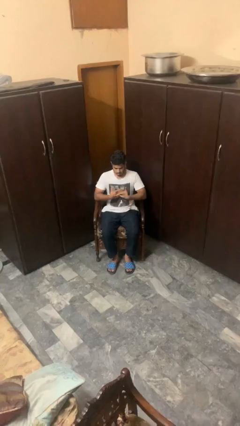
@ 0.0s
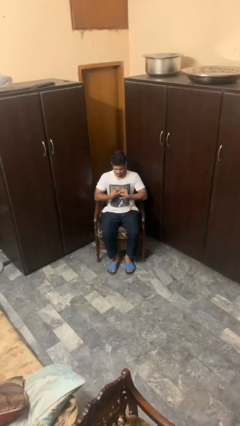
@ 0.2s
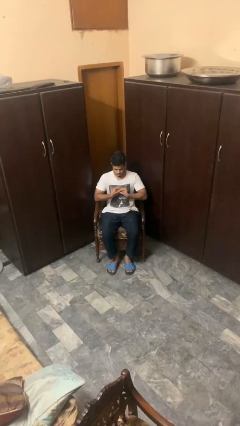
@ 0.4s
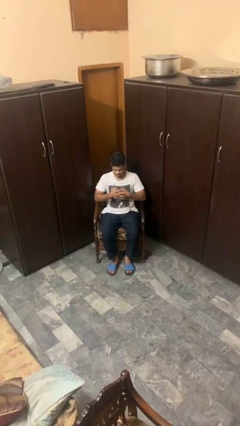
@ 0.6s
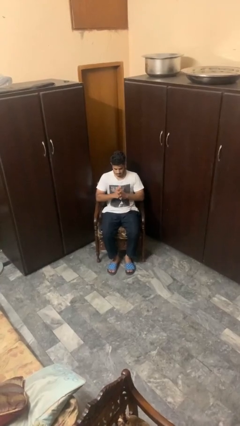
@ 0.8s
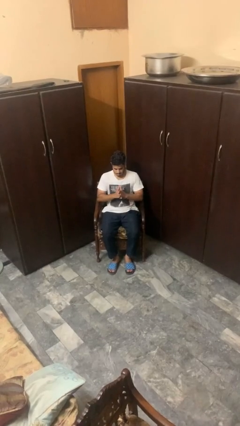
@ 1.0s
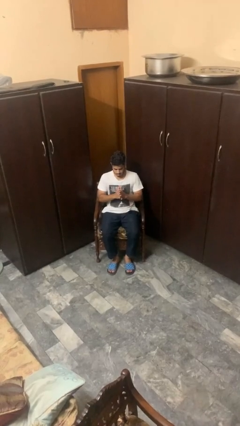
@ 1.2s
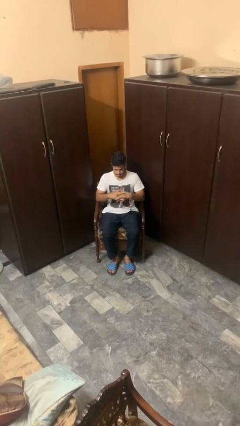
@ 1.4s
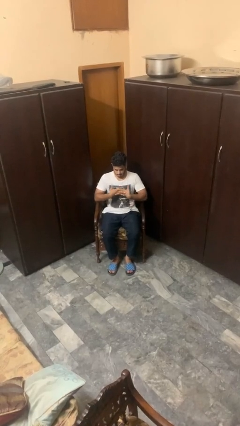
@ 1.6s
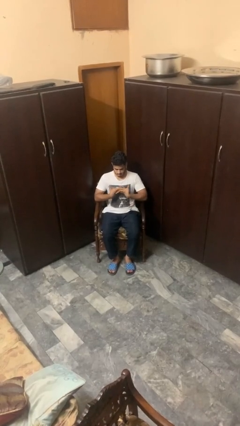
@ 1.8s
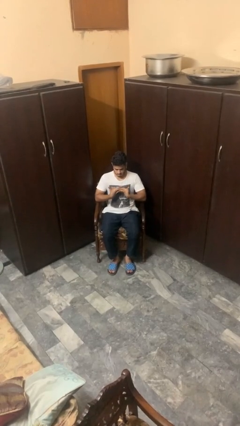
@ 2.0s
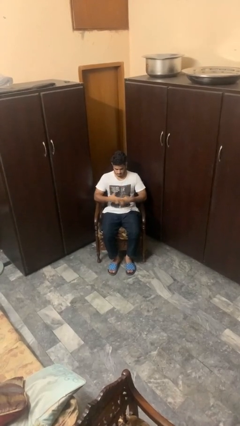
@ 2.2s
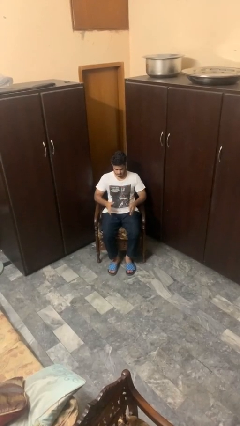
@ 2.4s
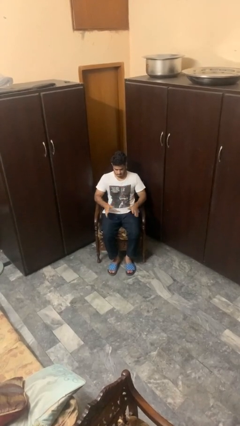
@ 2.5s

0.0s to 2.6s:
person cracks knuckles

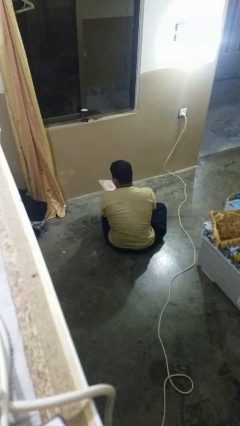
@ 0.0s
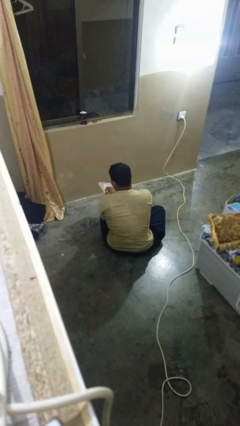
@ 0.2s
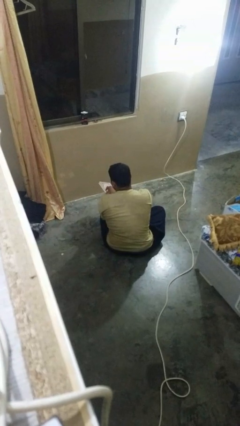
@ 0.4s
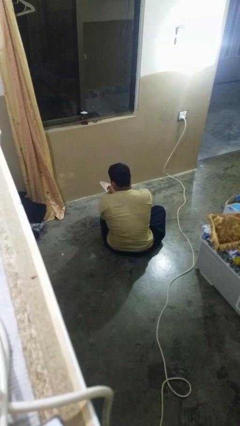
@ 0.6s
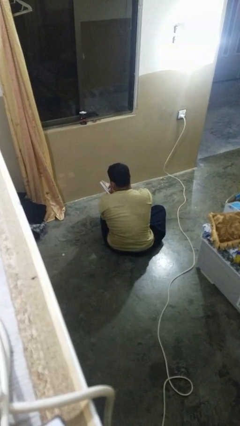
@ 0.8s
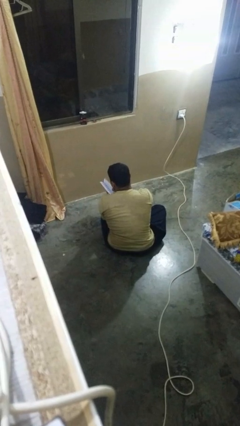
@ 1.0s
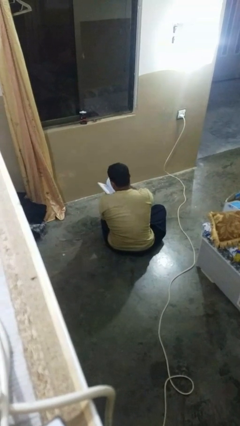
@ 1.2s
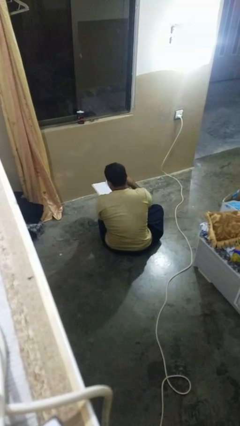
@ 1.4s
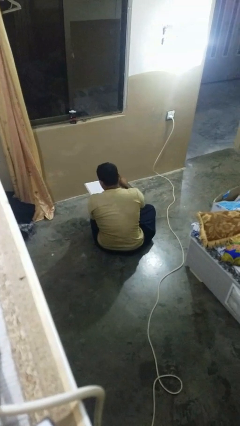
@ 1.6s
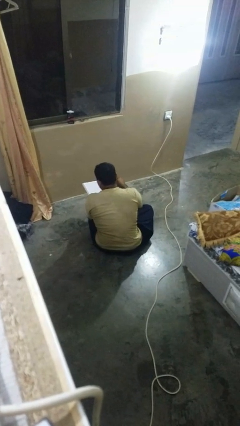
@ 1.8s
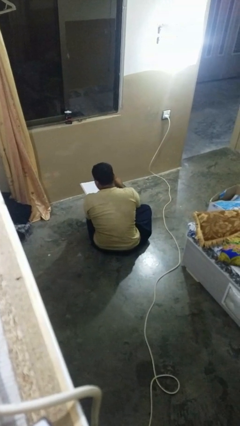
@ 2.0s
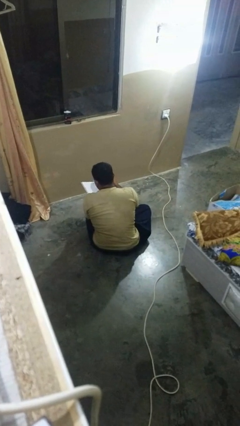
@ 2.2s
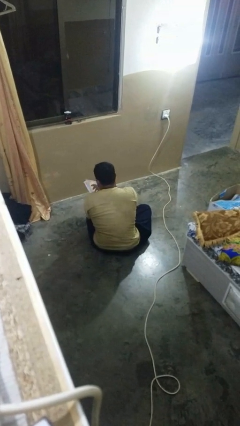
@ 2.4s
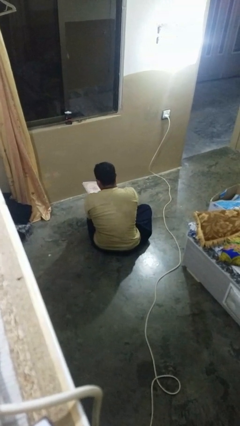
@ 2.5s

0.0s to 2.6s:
person reads book

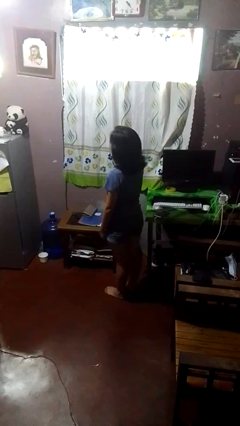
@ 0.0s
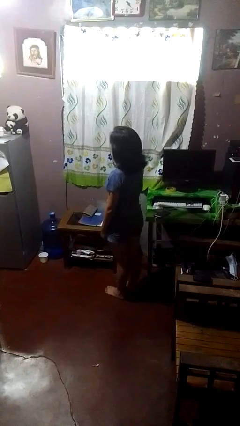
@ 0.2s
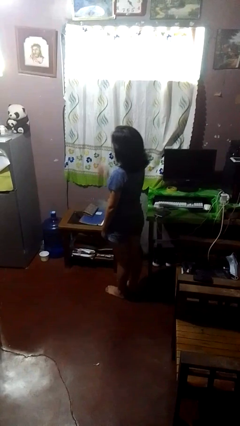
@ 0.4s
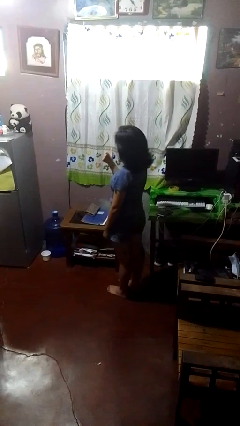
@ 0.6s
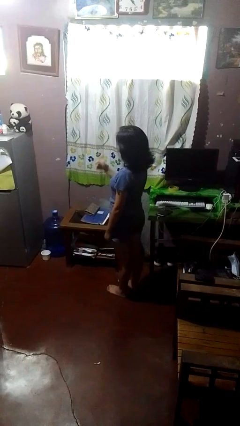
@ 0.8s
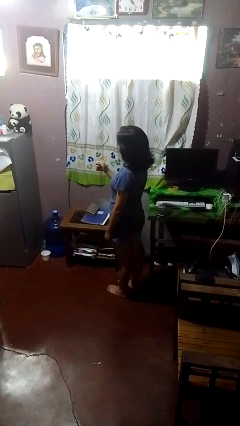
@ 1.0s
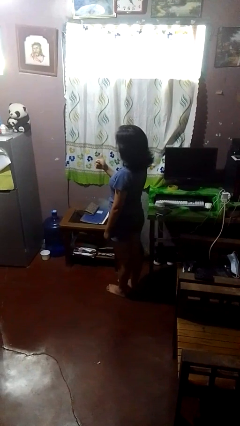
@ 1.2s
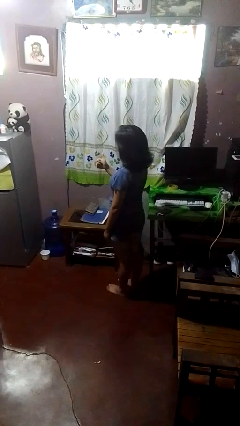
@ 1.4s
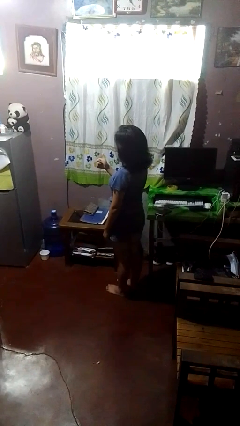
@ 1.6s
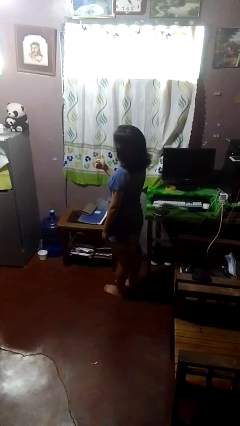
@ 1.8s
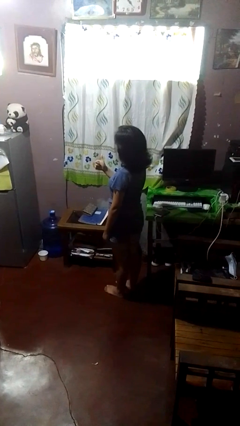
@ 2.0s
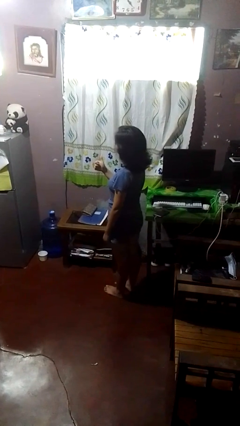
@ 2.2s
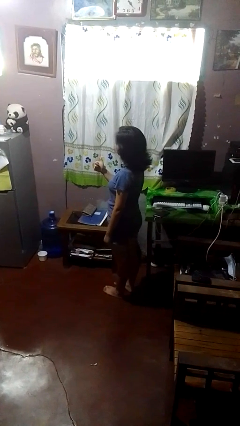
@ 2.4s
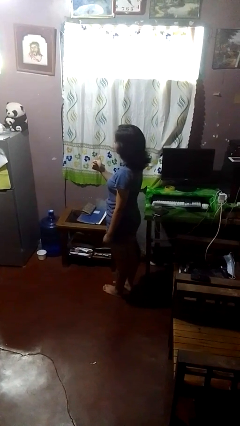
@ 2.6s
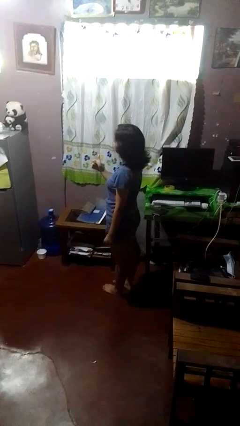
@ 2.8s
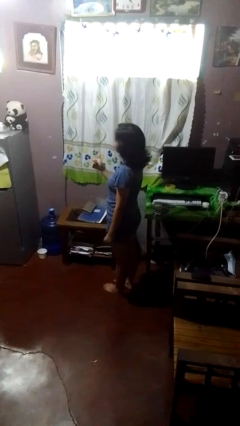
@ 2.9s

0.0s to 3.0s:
person gestures thumbs up

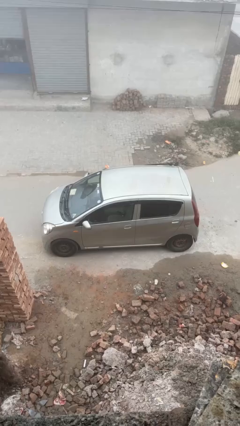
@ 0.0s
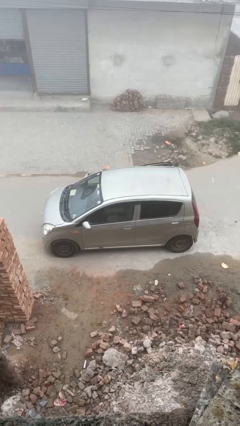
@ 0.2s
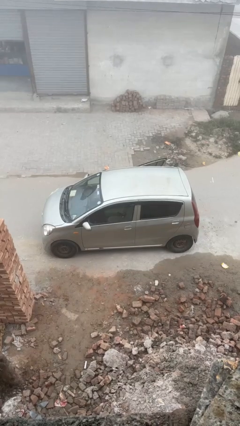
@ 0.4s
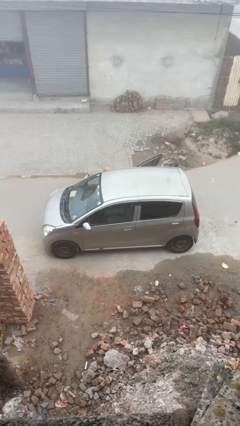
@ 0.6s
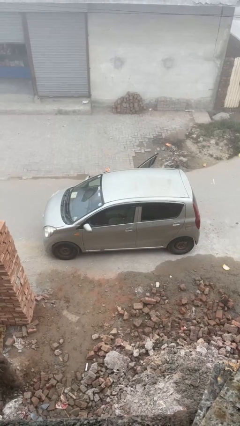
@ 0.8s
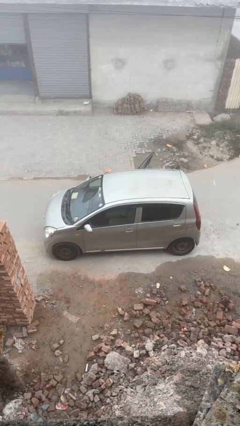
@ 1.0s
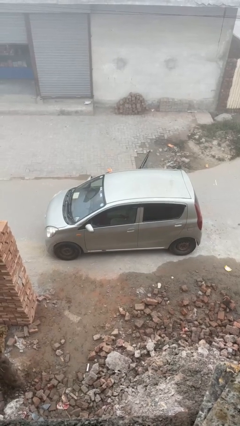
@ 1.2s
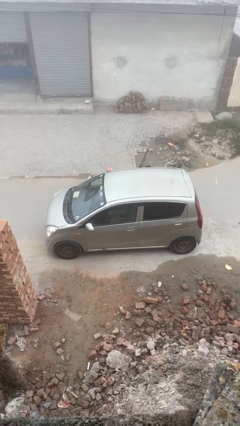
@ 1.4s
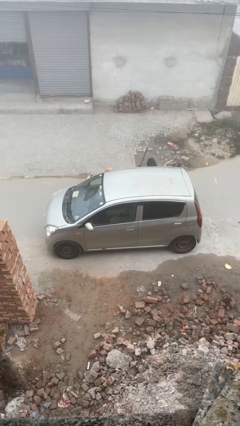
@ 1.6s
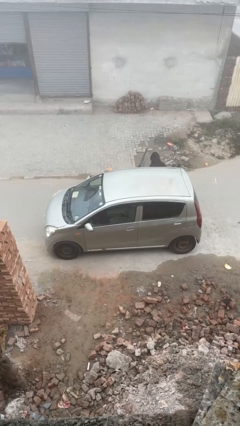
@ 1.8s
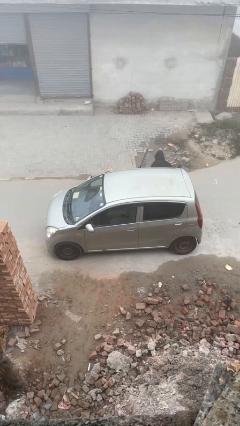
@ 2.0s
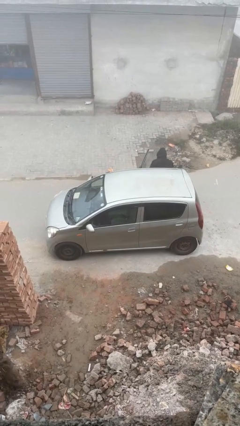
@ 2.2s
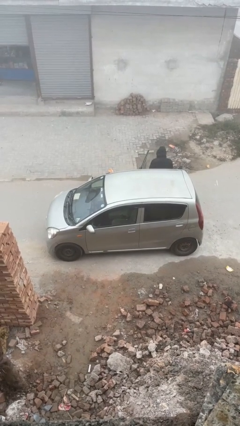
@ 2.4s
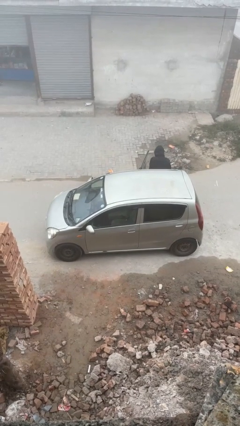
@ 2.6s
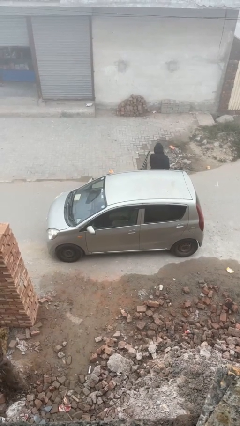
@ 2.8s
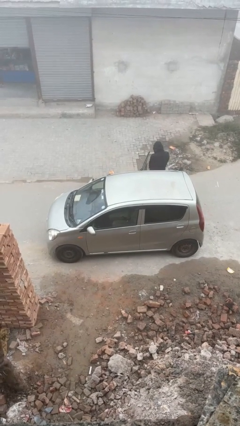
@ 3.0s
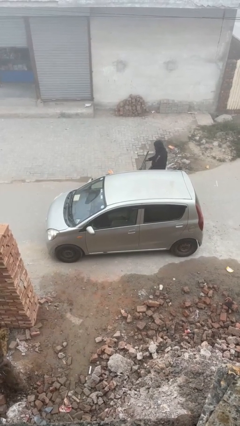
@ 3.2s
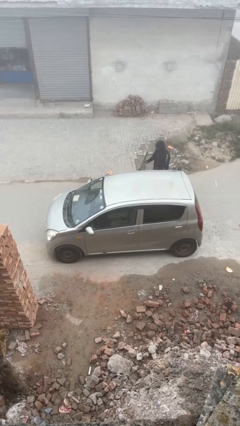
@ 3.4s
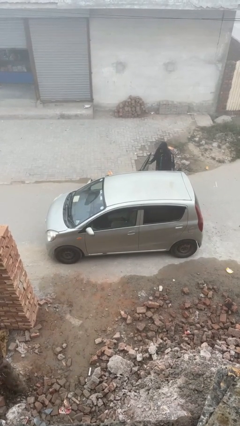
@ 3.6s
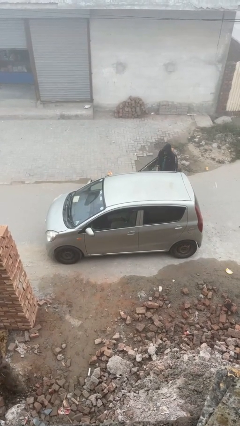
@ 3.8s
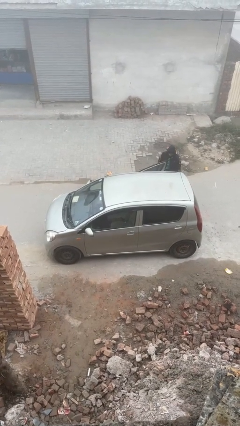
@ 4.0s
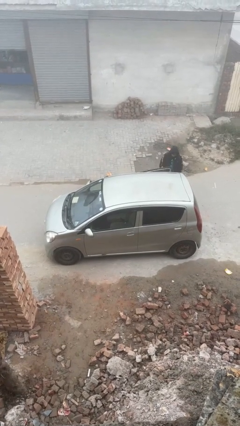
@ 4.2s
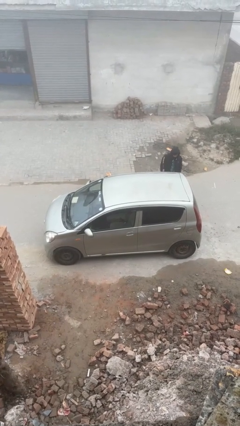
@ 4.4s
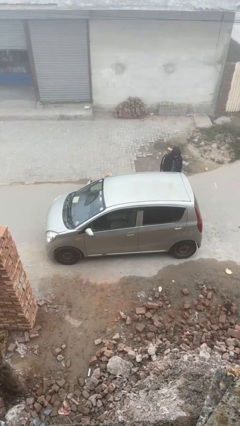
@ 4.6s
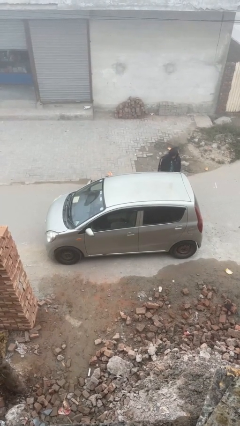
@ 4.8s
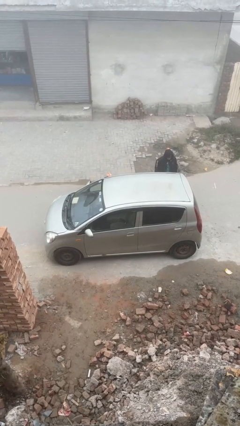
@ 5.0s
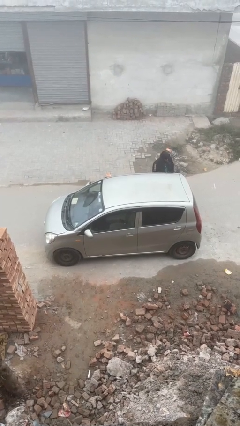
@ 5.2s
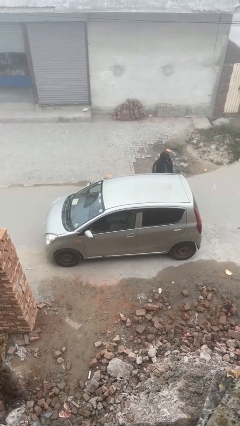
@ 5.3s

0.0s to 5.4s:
car drops off person

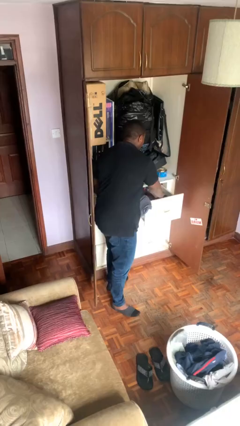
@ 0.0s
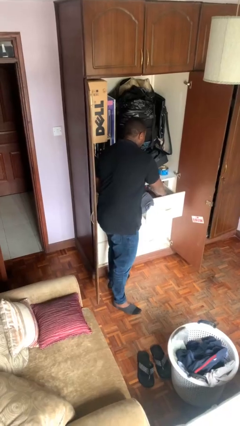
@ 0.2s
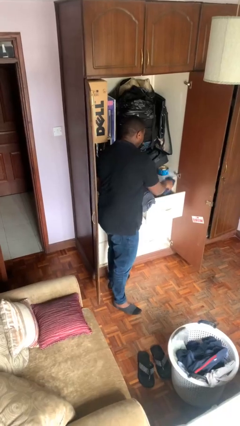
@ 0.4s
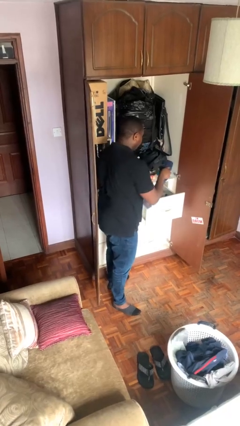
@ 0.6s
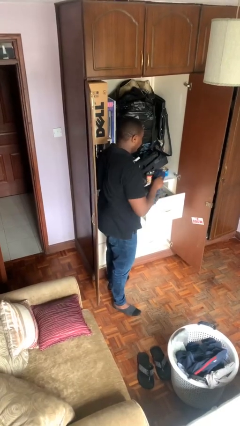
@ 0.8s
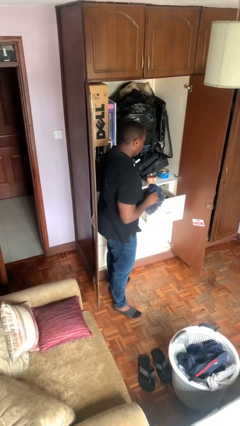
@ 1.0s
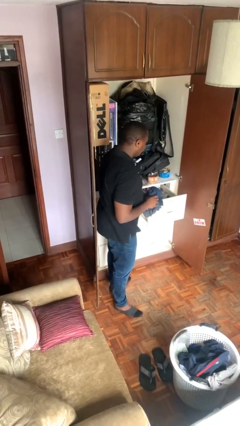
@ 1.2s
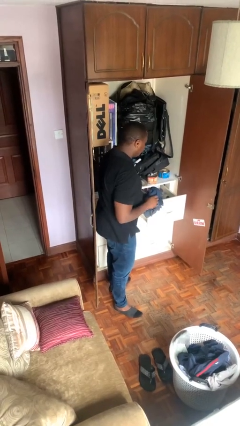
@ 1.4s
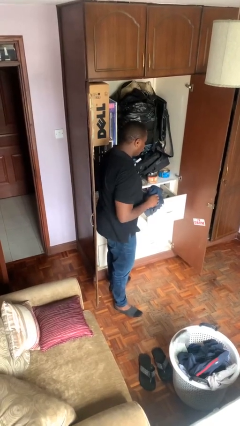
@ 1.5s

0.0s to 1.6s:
person takes clothes from dresser

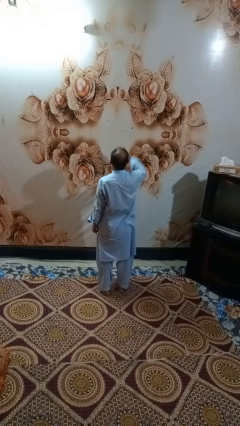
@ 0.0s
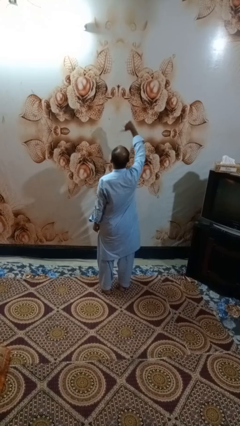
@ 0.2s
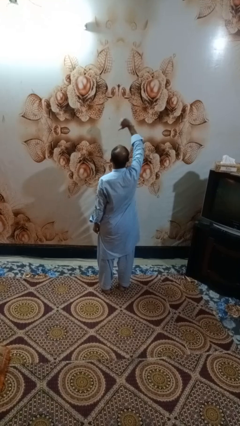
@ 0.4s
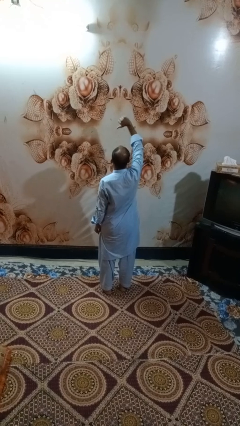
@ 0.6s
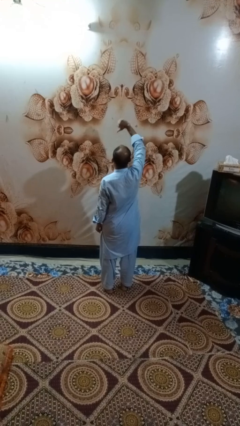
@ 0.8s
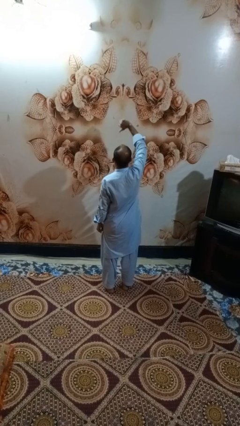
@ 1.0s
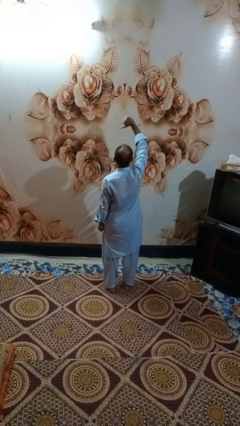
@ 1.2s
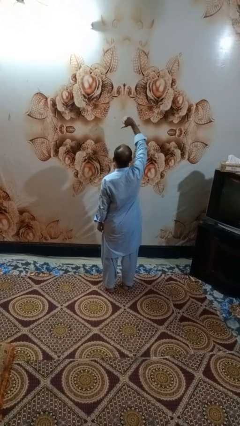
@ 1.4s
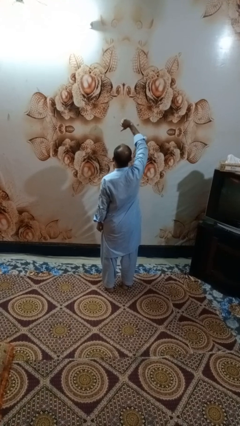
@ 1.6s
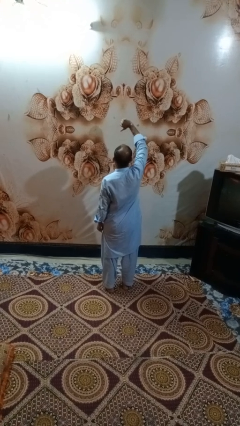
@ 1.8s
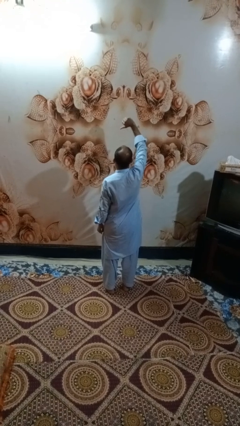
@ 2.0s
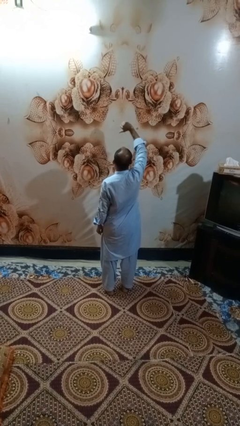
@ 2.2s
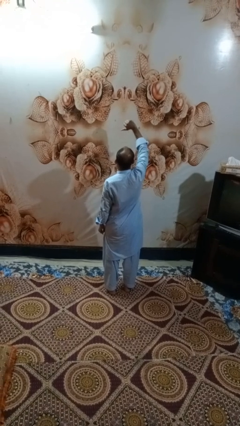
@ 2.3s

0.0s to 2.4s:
person gestures thumbs down

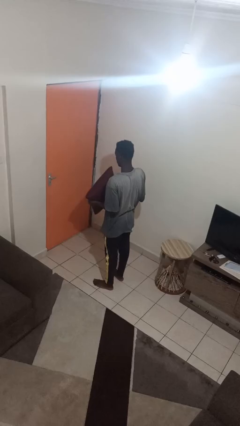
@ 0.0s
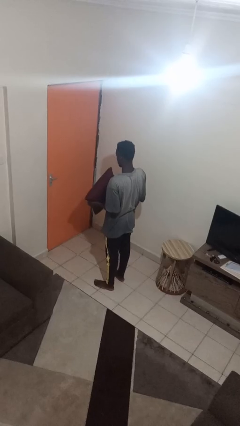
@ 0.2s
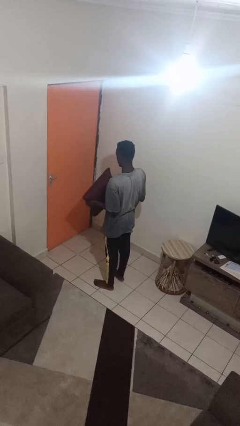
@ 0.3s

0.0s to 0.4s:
person drops object
